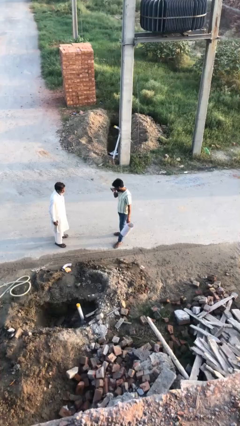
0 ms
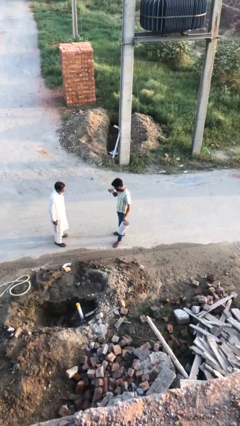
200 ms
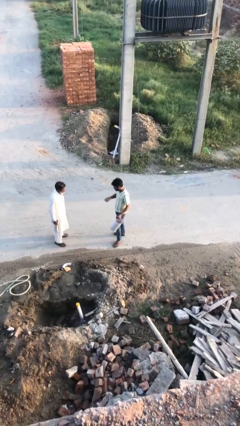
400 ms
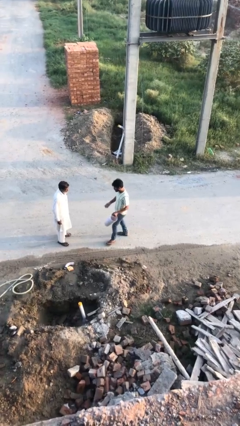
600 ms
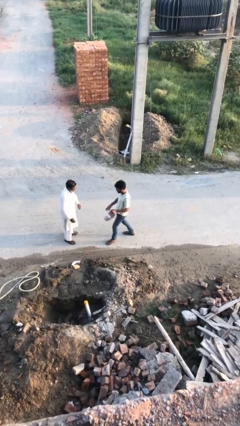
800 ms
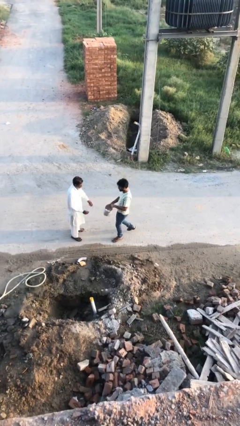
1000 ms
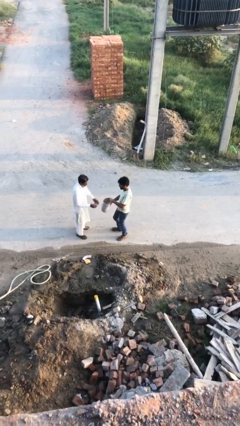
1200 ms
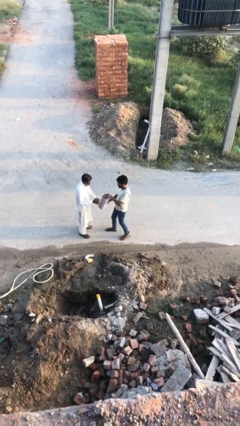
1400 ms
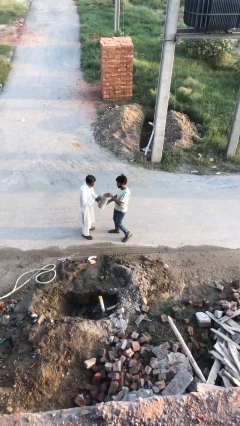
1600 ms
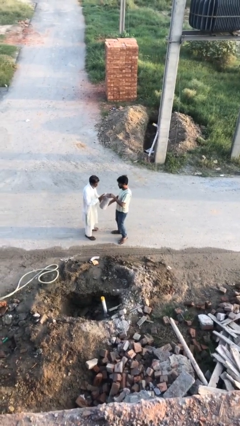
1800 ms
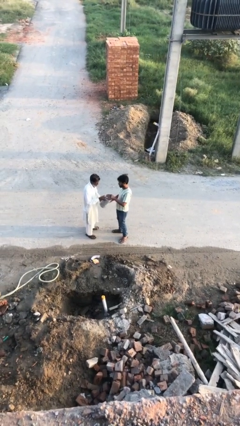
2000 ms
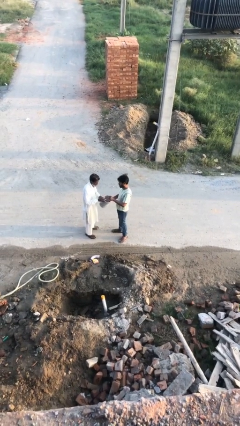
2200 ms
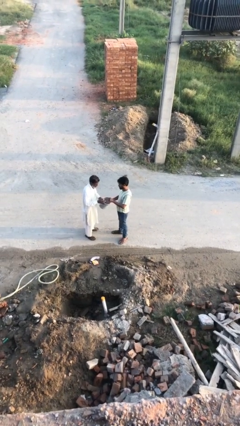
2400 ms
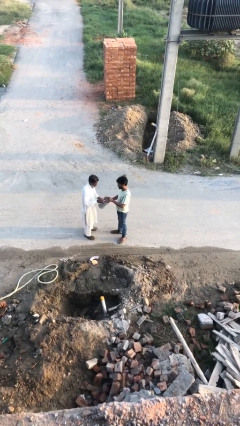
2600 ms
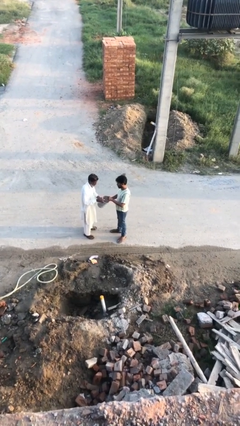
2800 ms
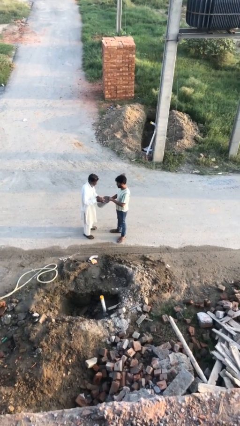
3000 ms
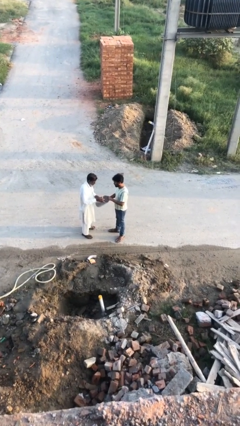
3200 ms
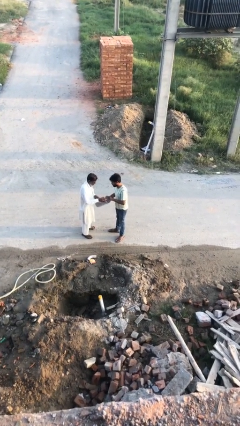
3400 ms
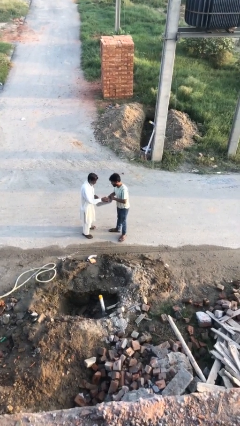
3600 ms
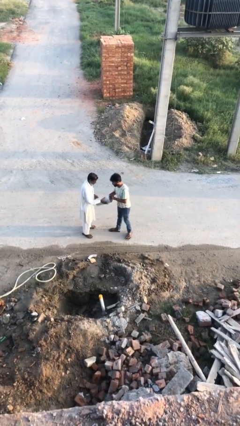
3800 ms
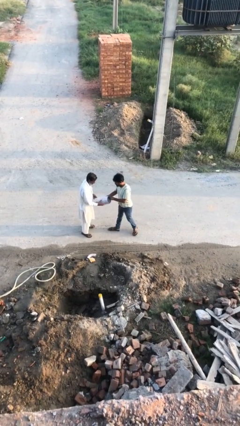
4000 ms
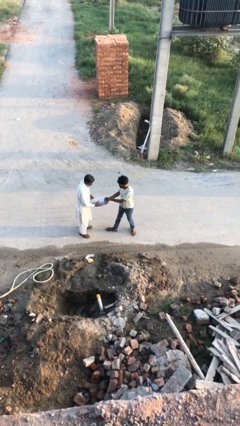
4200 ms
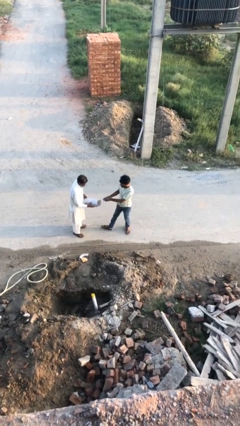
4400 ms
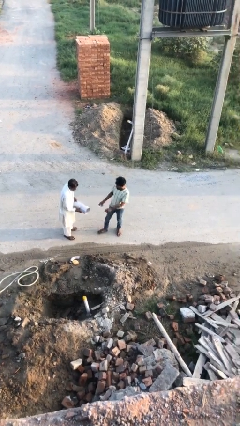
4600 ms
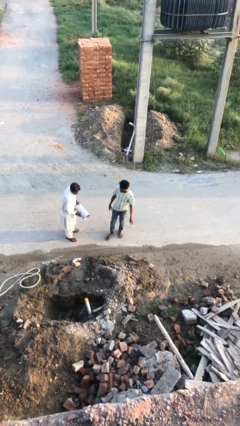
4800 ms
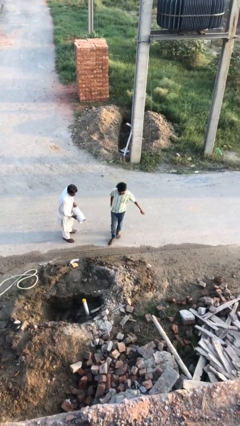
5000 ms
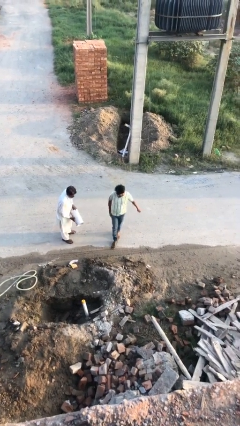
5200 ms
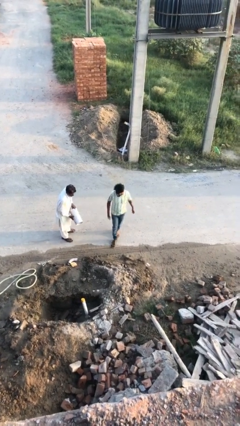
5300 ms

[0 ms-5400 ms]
person transfers object to person

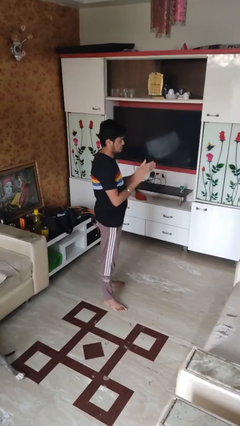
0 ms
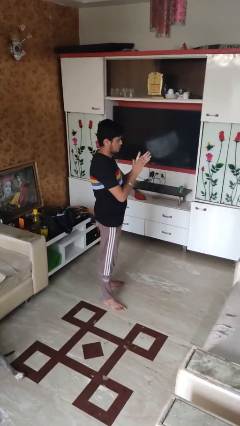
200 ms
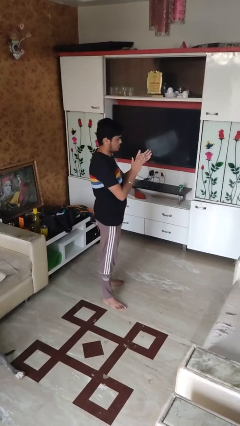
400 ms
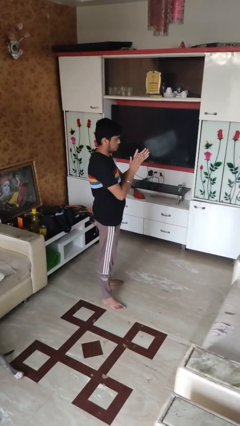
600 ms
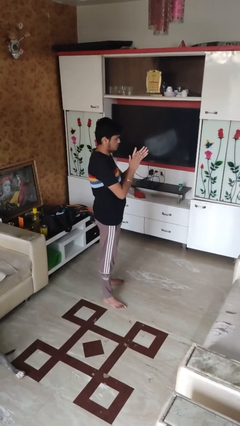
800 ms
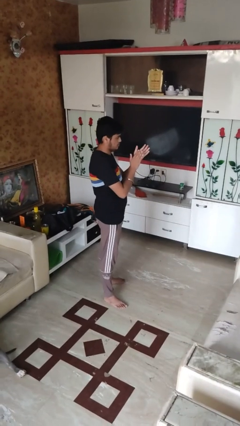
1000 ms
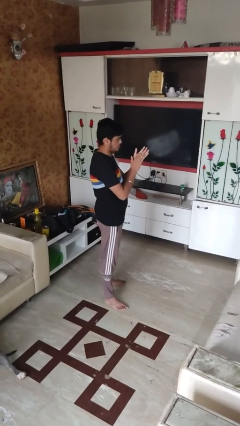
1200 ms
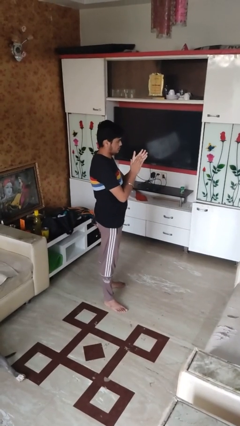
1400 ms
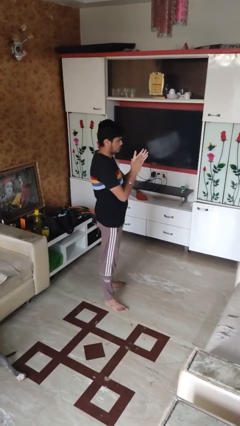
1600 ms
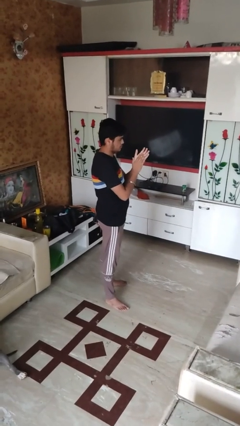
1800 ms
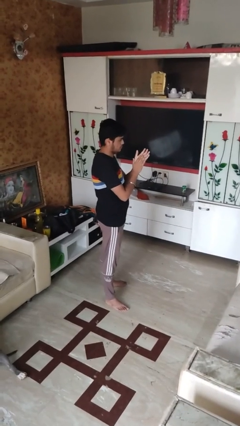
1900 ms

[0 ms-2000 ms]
person claps hands

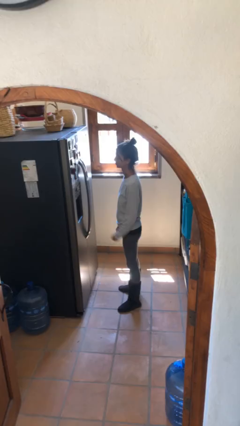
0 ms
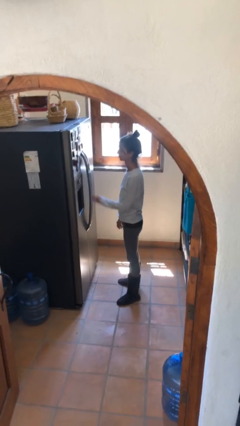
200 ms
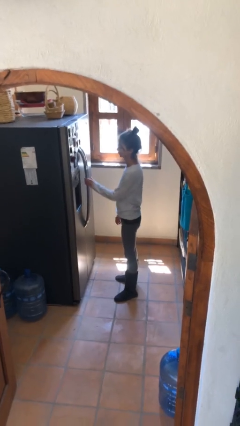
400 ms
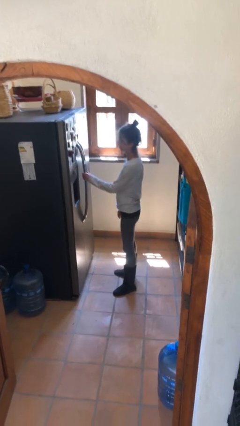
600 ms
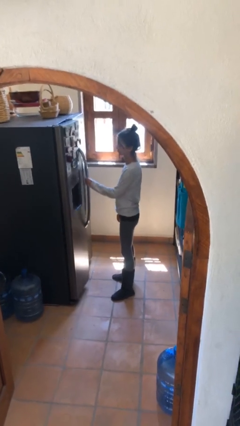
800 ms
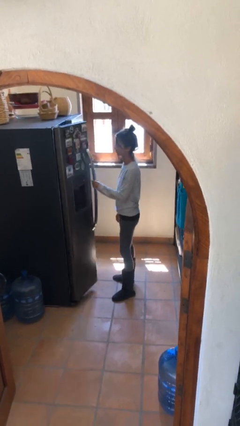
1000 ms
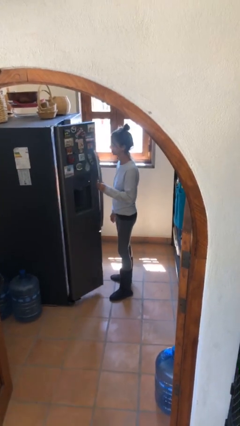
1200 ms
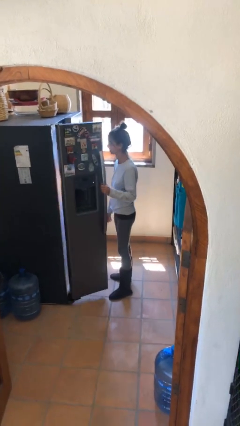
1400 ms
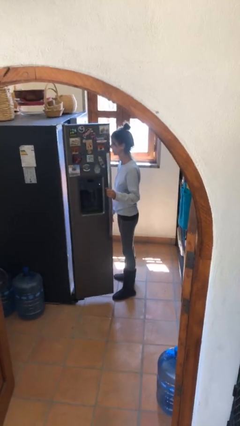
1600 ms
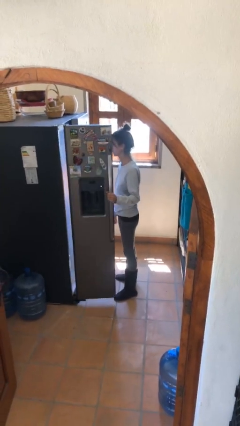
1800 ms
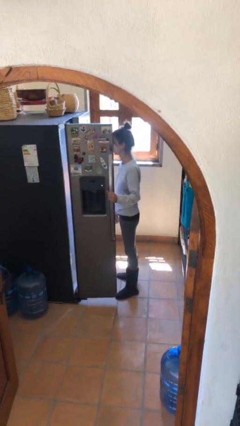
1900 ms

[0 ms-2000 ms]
person opens refrigerator

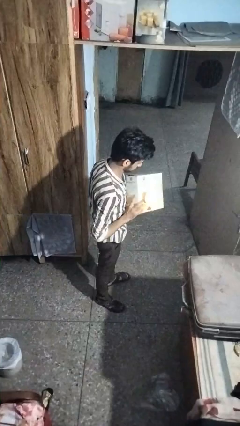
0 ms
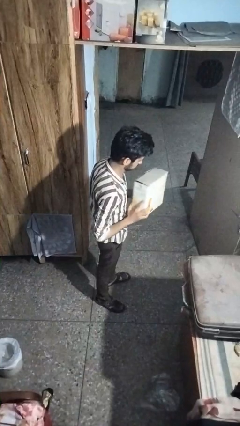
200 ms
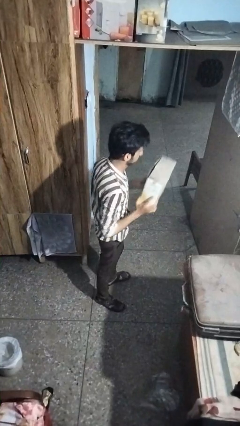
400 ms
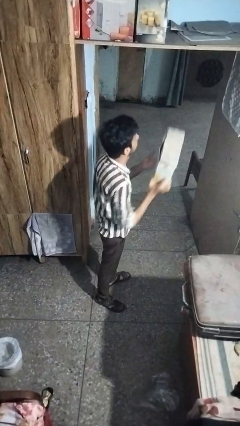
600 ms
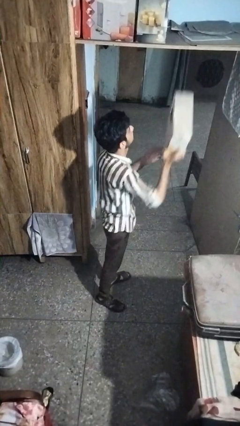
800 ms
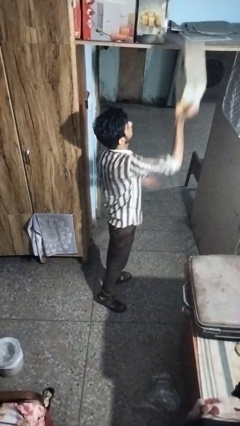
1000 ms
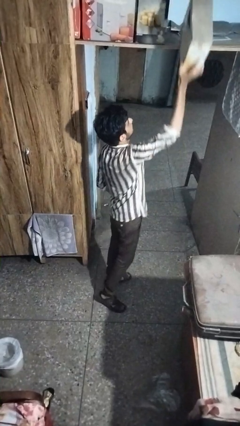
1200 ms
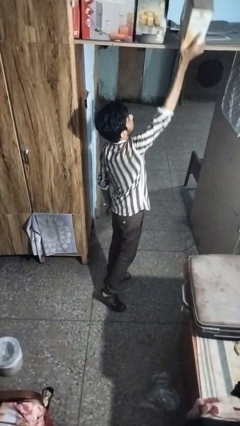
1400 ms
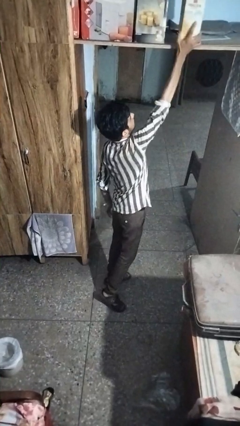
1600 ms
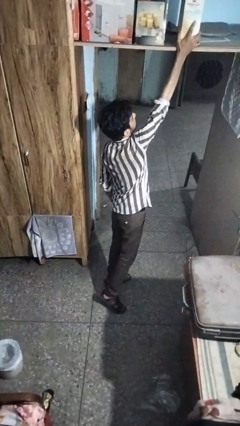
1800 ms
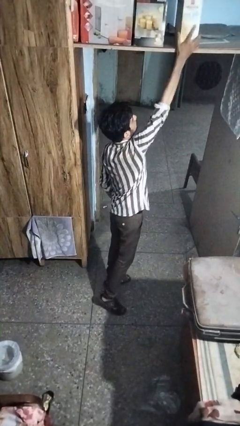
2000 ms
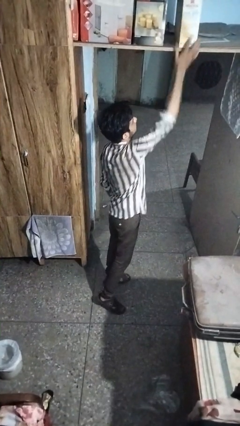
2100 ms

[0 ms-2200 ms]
person puts down object on shelf

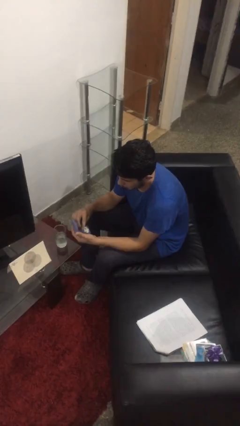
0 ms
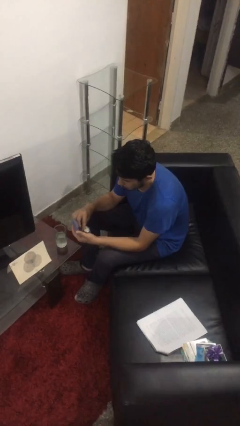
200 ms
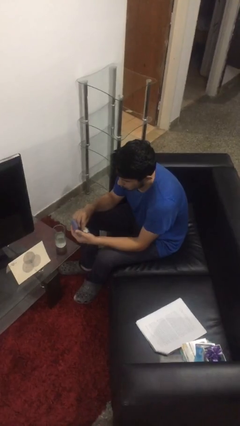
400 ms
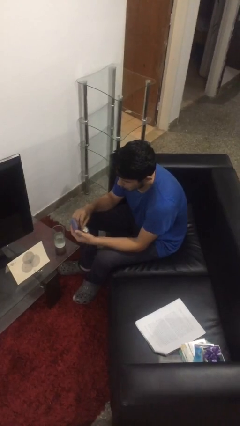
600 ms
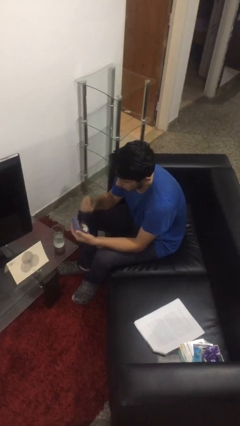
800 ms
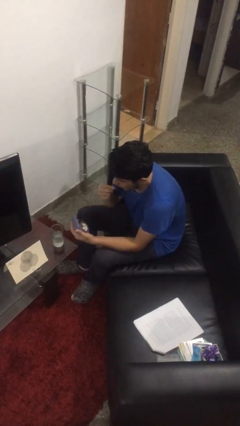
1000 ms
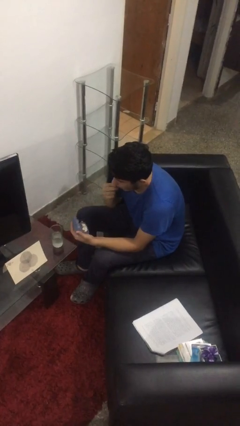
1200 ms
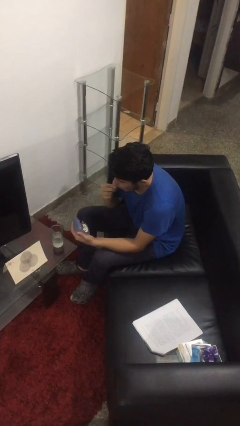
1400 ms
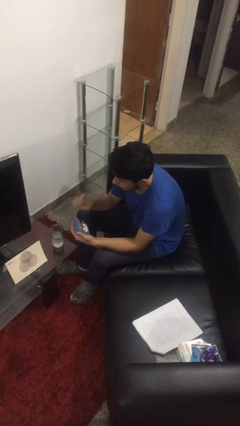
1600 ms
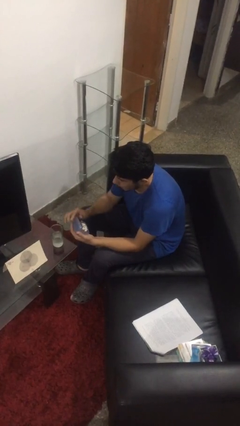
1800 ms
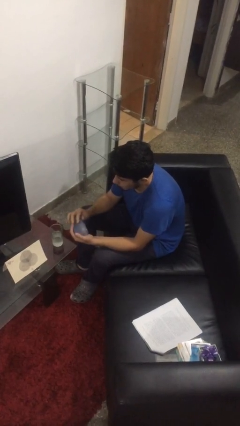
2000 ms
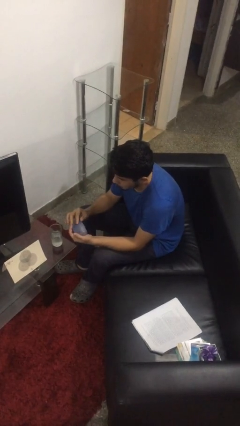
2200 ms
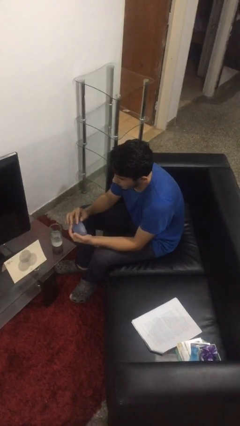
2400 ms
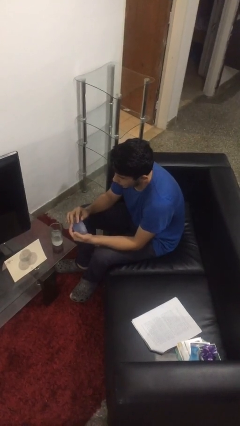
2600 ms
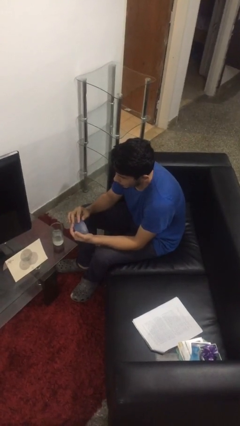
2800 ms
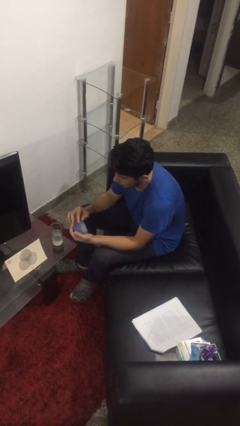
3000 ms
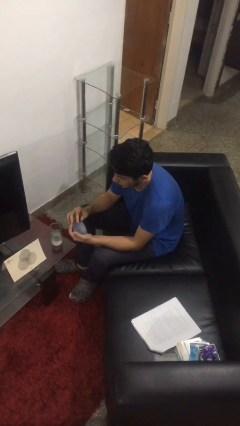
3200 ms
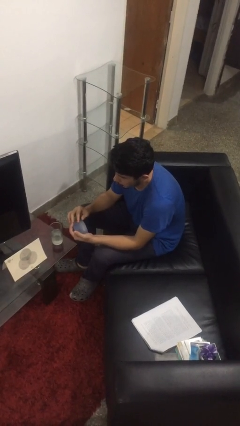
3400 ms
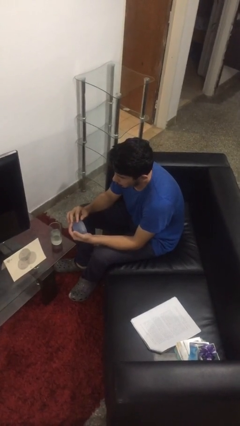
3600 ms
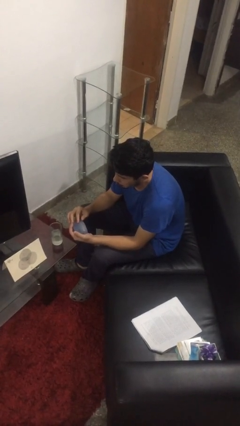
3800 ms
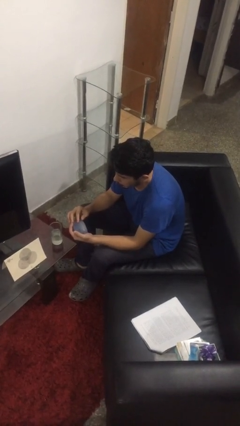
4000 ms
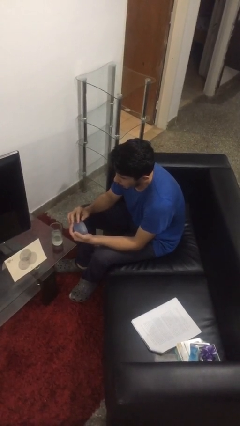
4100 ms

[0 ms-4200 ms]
person takes medicine pills

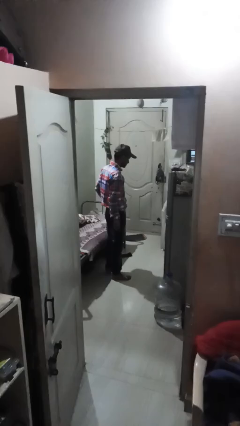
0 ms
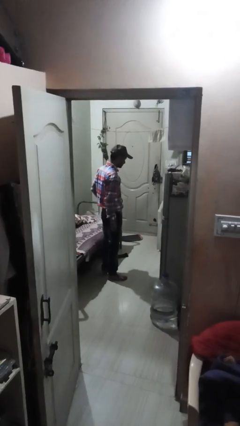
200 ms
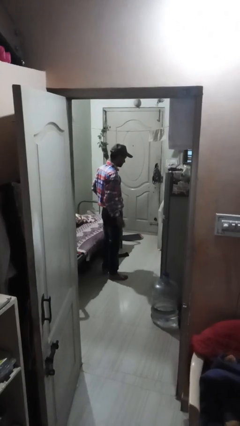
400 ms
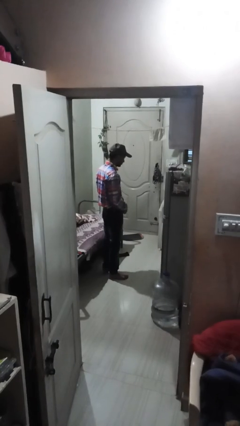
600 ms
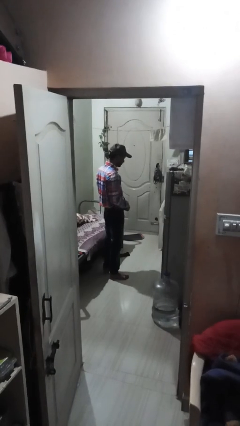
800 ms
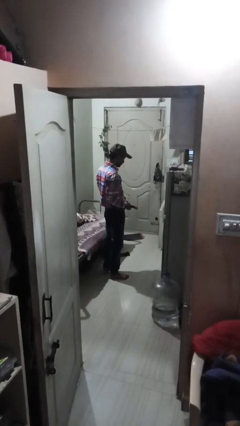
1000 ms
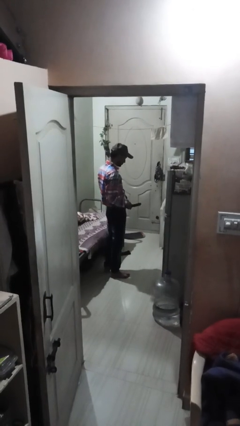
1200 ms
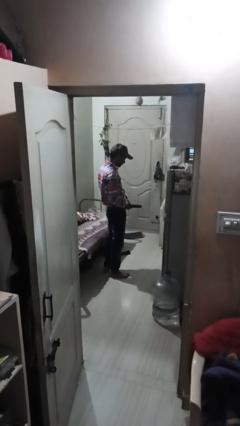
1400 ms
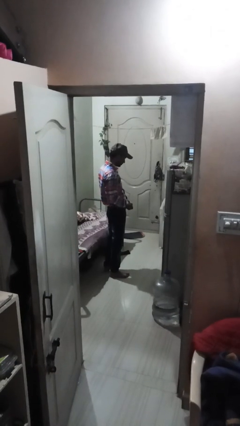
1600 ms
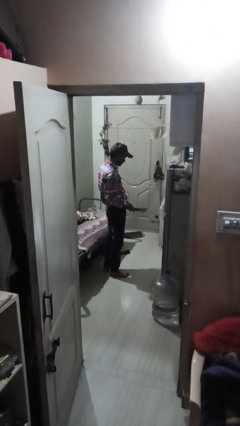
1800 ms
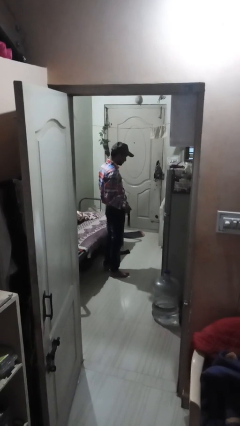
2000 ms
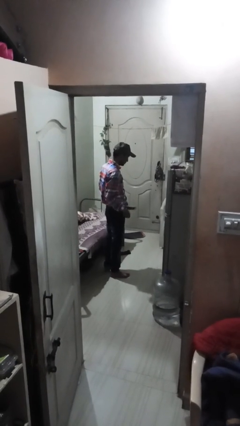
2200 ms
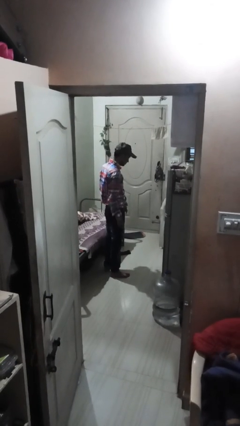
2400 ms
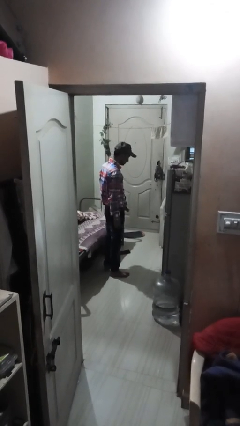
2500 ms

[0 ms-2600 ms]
person takes off belt
